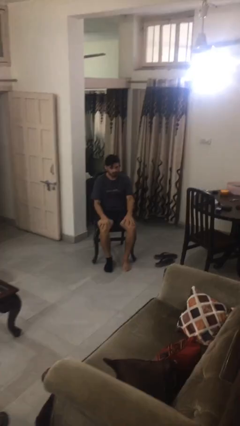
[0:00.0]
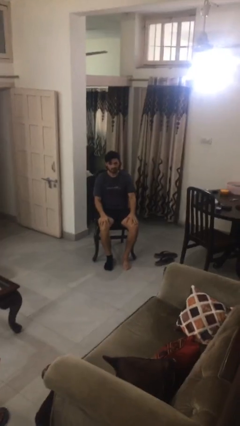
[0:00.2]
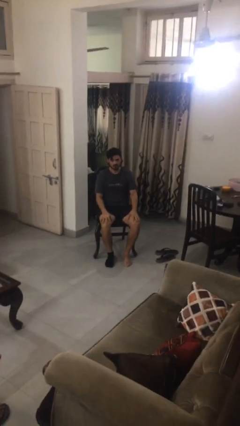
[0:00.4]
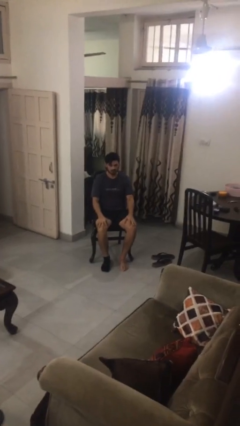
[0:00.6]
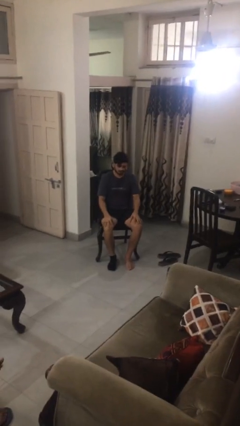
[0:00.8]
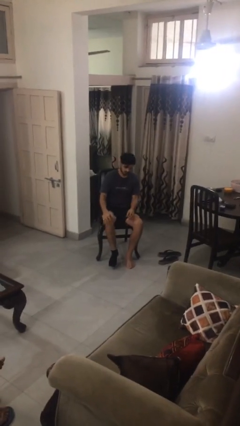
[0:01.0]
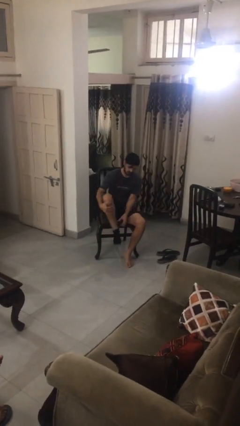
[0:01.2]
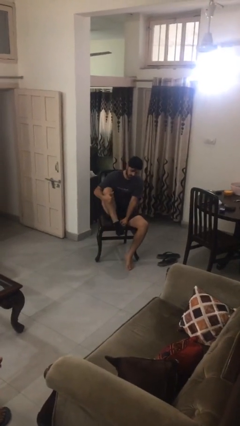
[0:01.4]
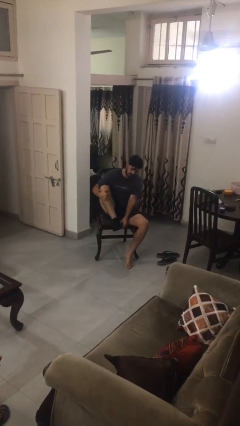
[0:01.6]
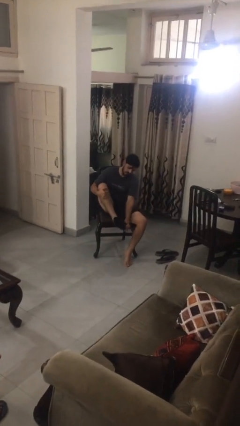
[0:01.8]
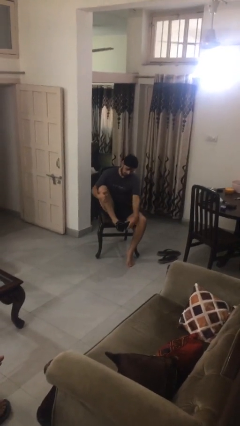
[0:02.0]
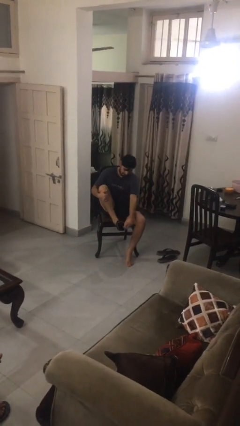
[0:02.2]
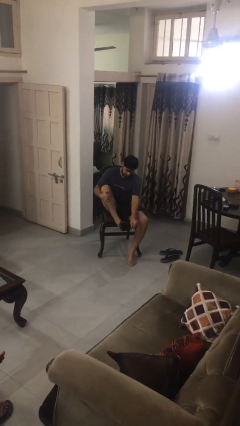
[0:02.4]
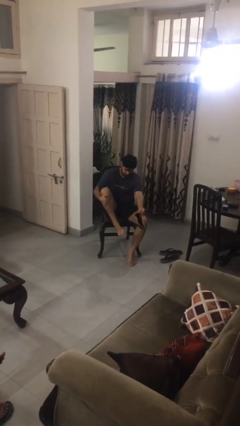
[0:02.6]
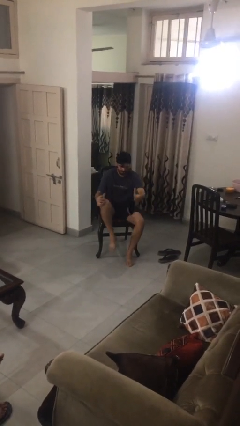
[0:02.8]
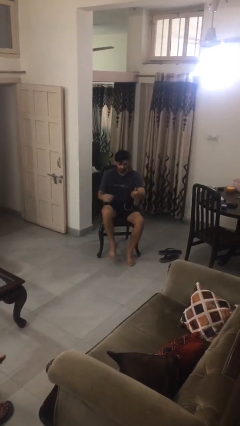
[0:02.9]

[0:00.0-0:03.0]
person takes off socks

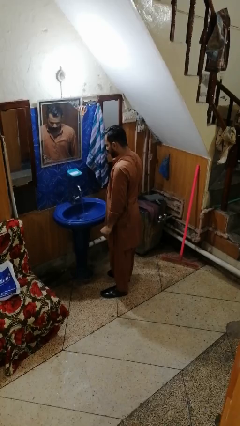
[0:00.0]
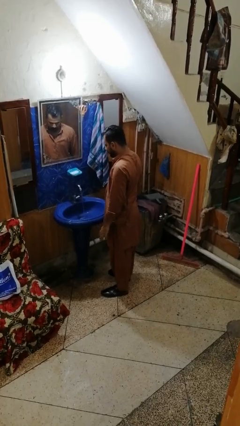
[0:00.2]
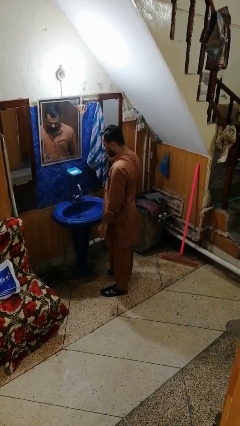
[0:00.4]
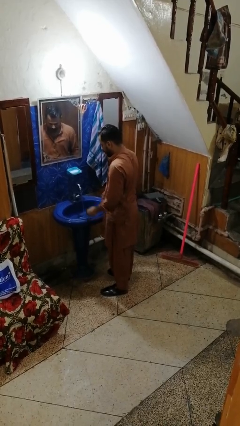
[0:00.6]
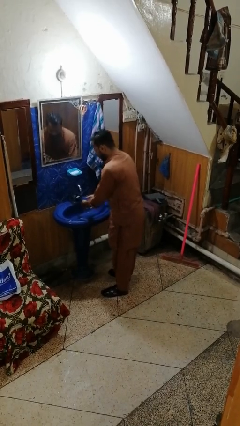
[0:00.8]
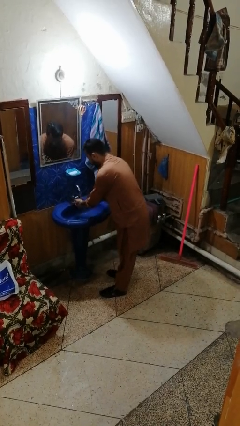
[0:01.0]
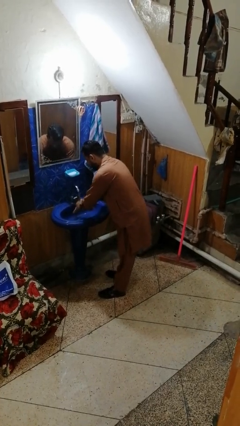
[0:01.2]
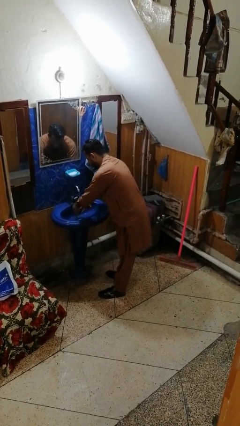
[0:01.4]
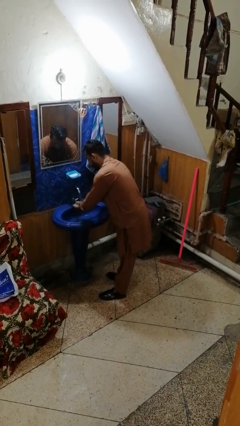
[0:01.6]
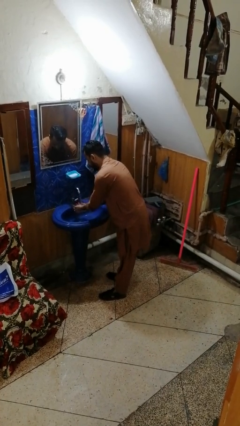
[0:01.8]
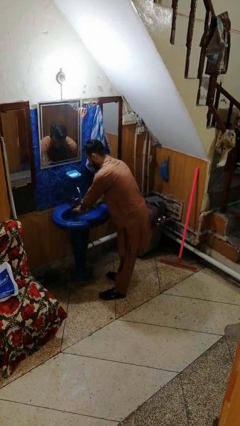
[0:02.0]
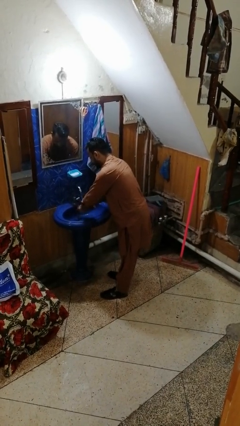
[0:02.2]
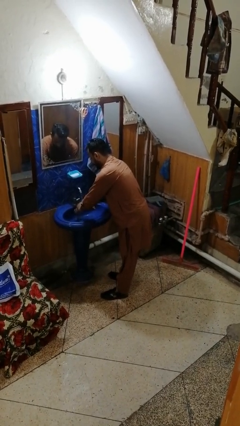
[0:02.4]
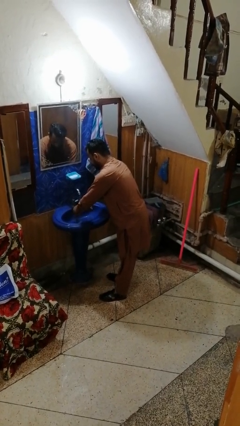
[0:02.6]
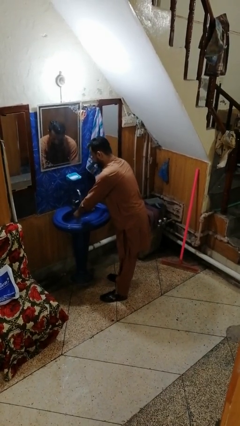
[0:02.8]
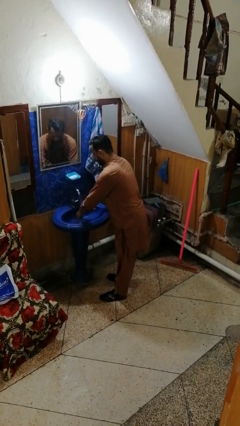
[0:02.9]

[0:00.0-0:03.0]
person washes hands

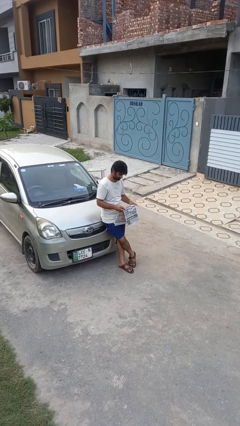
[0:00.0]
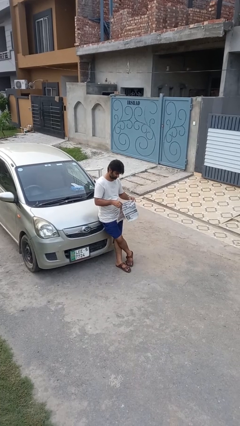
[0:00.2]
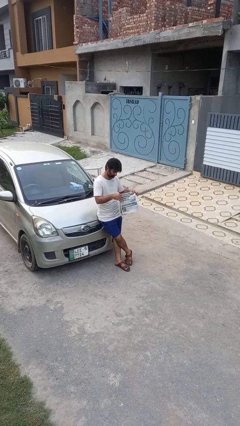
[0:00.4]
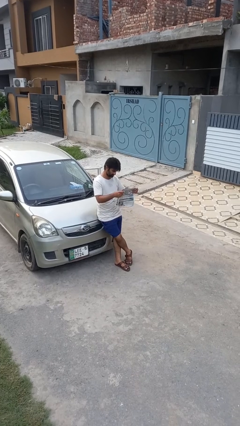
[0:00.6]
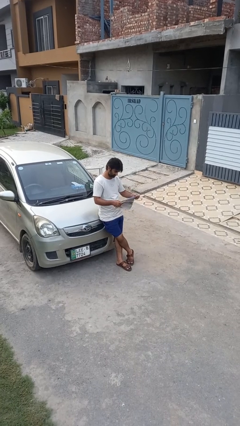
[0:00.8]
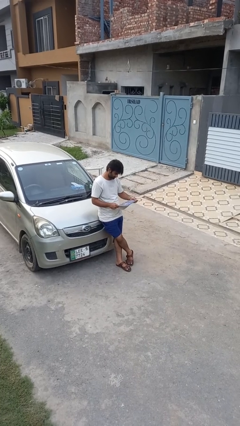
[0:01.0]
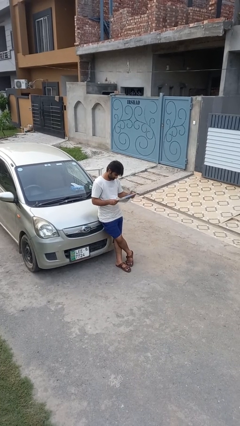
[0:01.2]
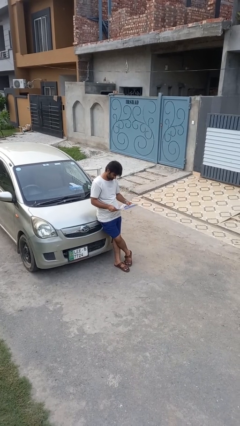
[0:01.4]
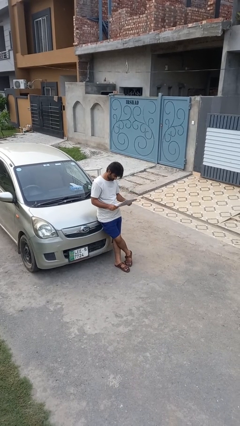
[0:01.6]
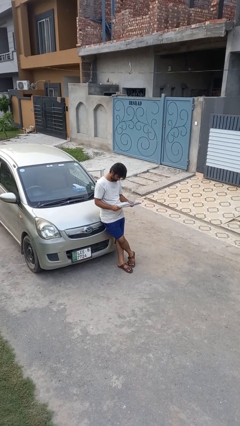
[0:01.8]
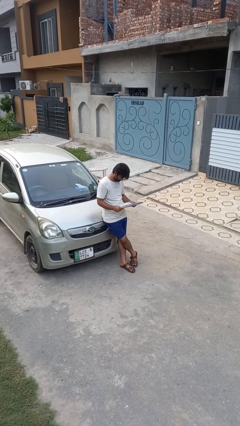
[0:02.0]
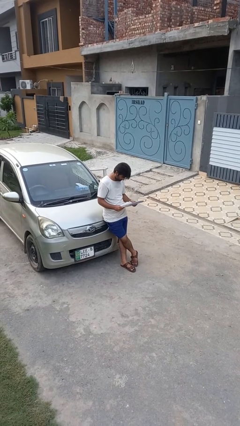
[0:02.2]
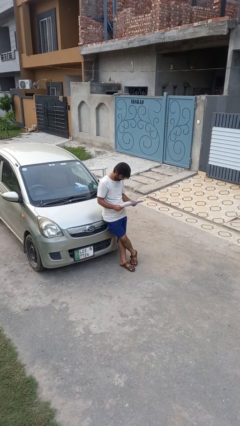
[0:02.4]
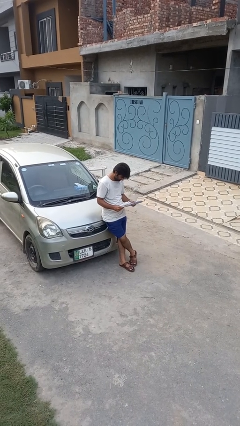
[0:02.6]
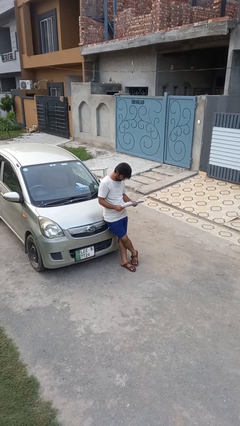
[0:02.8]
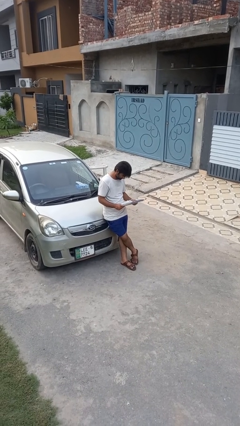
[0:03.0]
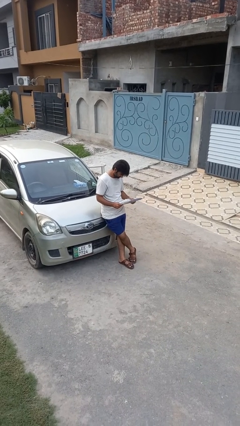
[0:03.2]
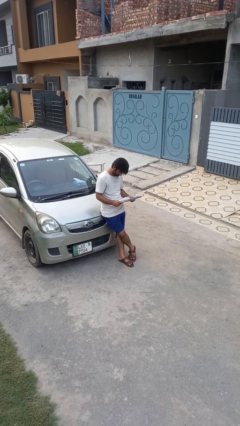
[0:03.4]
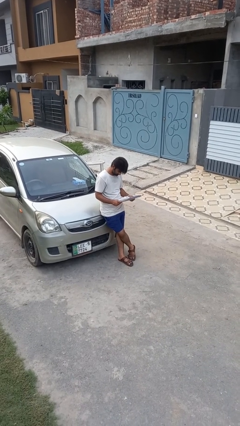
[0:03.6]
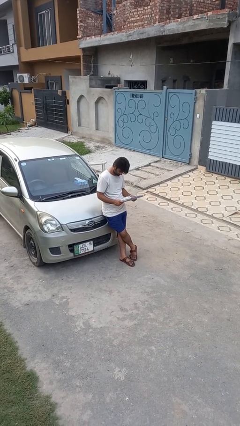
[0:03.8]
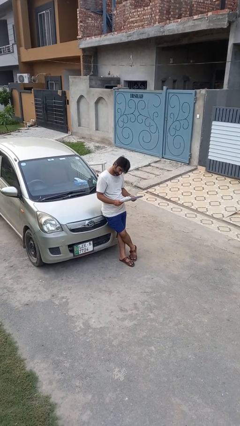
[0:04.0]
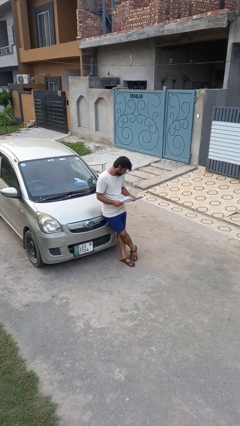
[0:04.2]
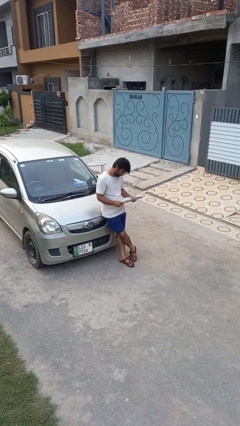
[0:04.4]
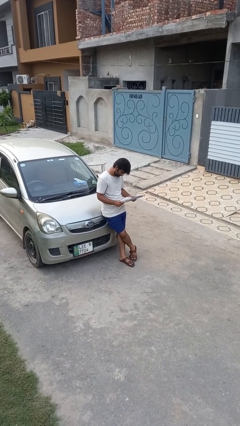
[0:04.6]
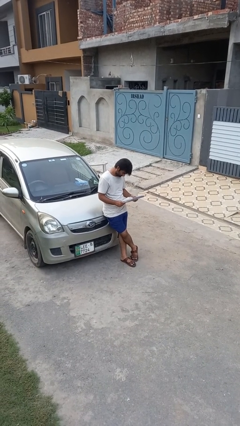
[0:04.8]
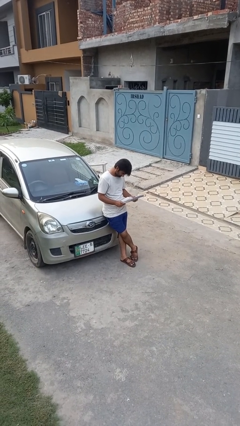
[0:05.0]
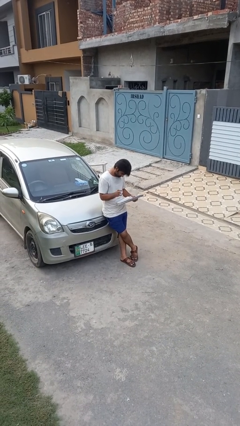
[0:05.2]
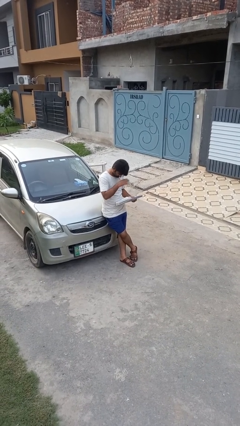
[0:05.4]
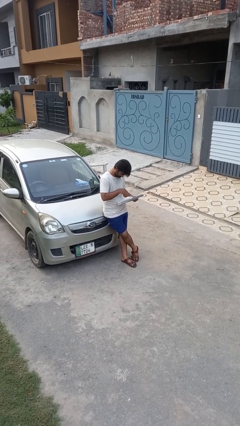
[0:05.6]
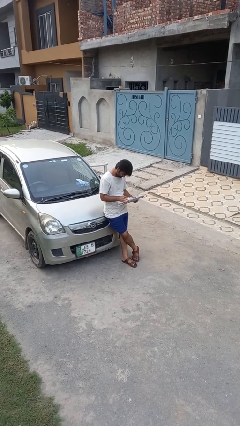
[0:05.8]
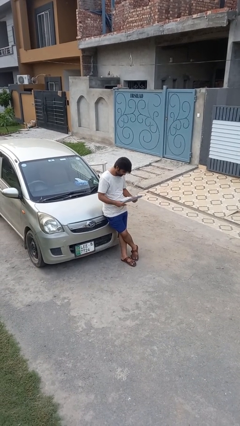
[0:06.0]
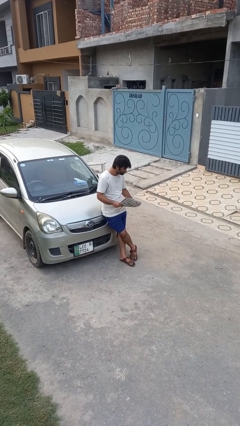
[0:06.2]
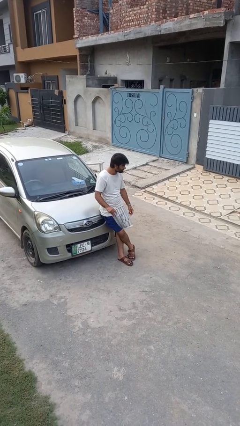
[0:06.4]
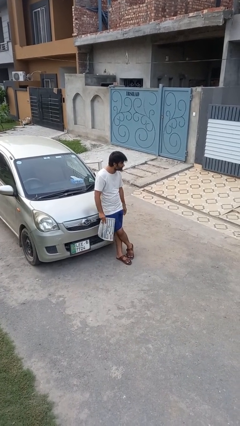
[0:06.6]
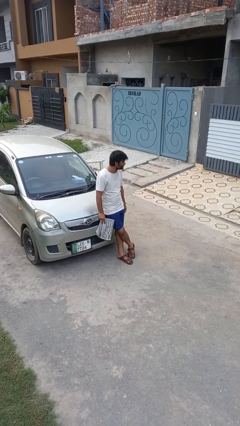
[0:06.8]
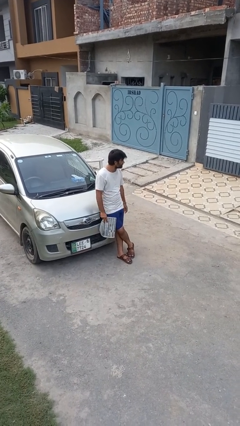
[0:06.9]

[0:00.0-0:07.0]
person reads newspaper

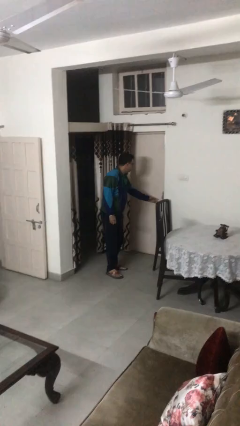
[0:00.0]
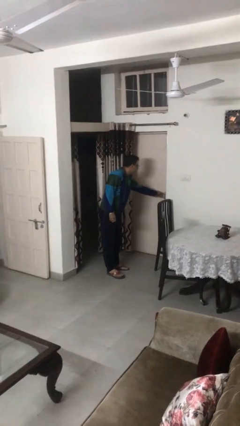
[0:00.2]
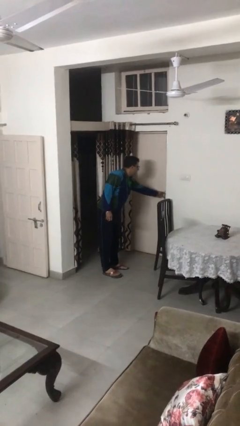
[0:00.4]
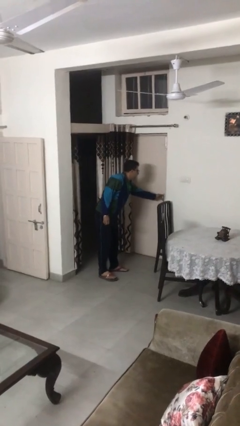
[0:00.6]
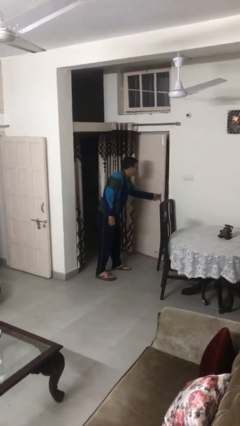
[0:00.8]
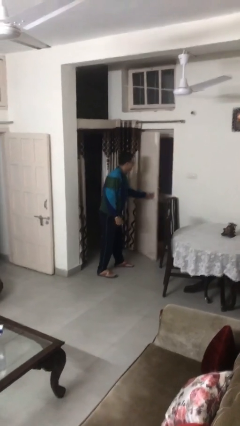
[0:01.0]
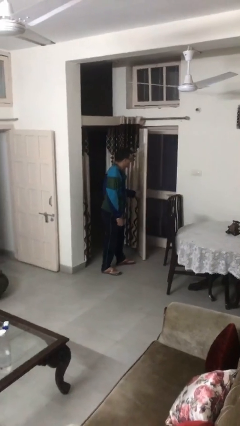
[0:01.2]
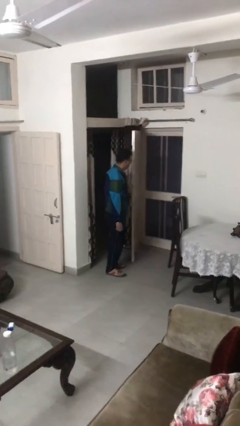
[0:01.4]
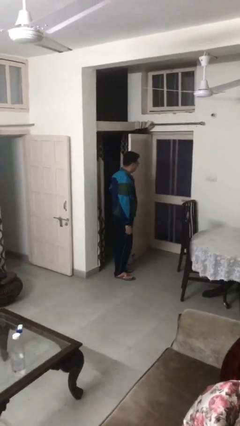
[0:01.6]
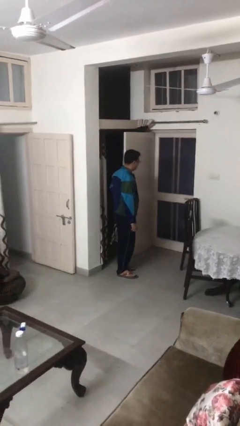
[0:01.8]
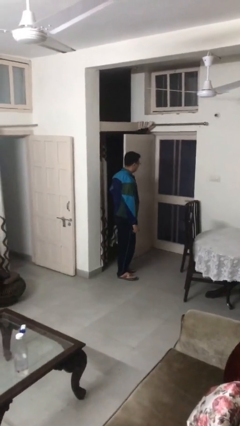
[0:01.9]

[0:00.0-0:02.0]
person opens facility door

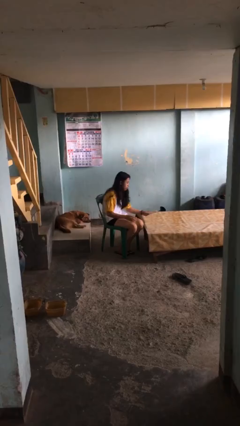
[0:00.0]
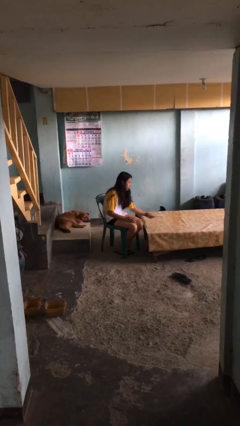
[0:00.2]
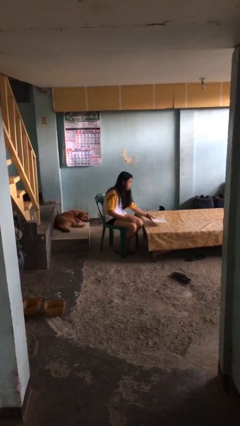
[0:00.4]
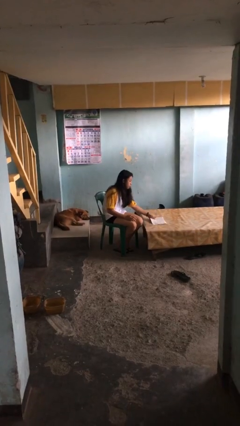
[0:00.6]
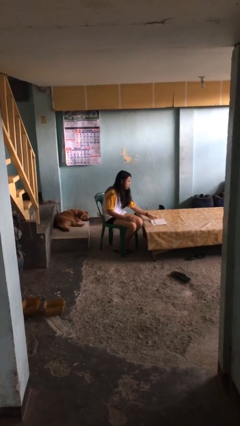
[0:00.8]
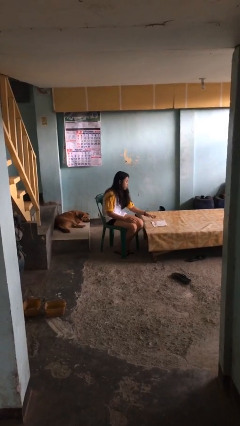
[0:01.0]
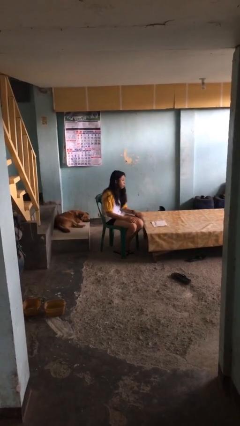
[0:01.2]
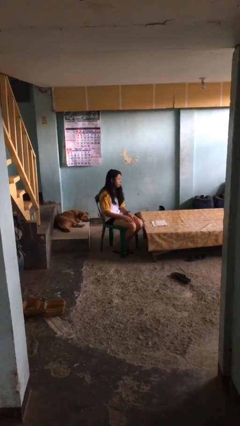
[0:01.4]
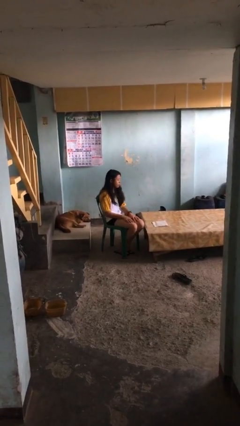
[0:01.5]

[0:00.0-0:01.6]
person puts down object on table

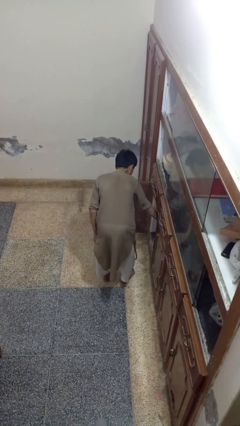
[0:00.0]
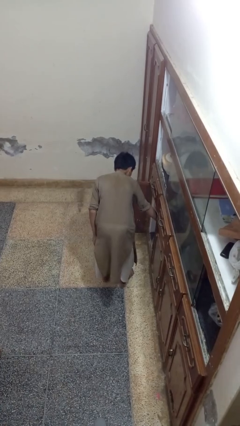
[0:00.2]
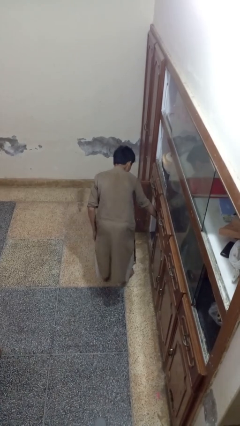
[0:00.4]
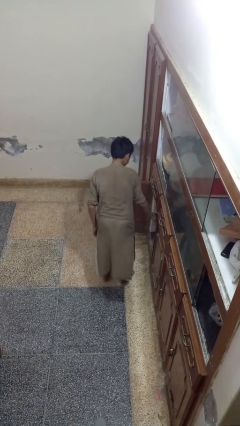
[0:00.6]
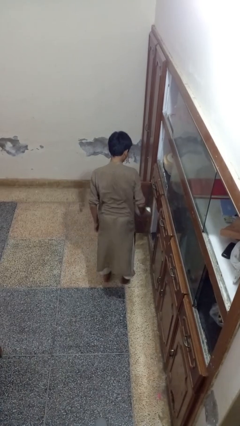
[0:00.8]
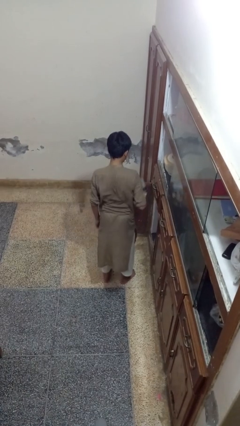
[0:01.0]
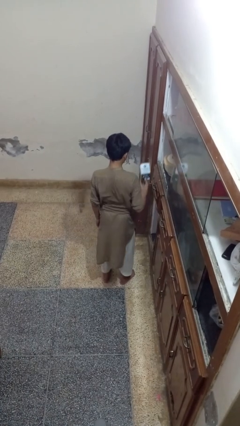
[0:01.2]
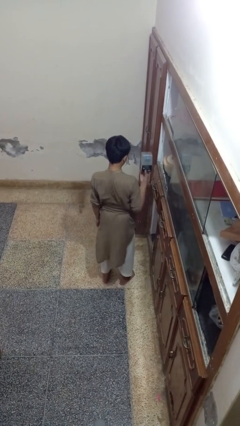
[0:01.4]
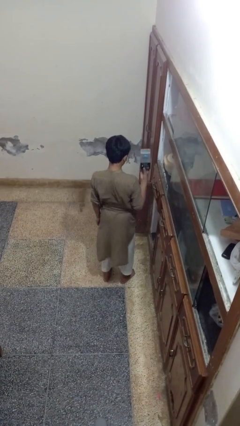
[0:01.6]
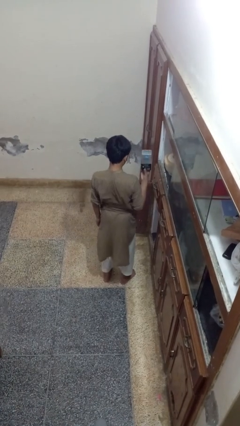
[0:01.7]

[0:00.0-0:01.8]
person takes object from cabinet
